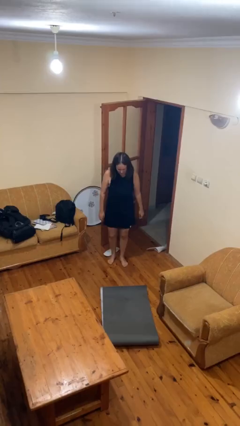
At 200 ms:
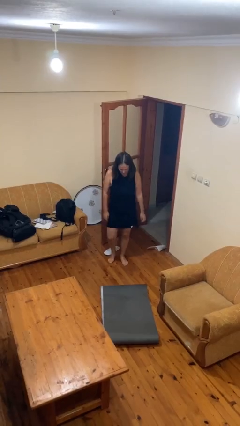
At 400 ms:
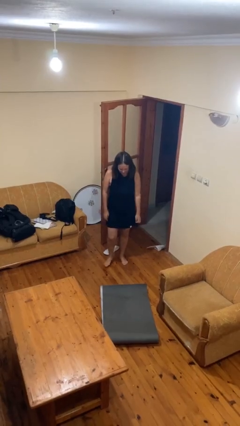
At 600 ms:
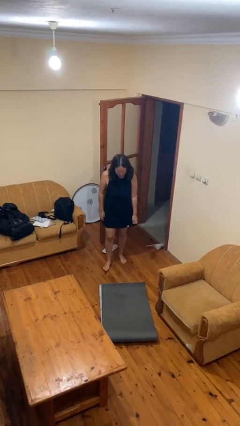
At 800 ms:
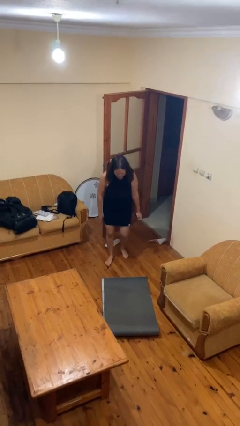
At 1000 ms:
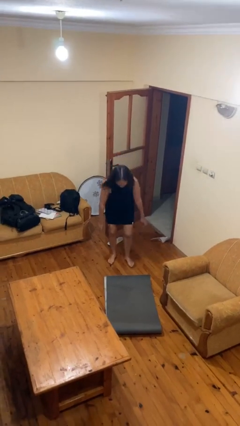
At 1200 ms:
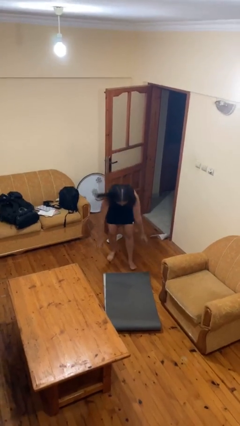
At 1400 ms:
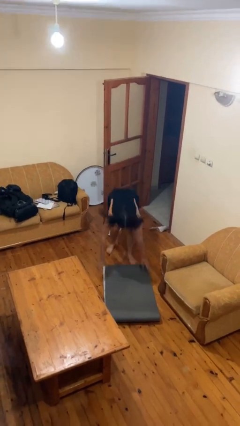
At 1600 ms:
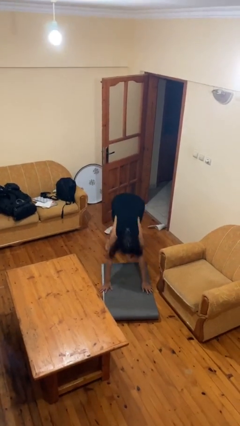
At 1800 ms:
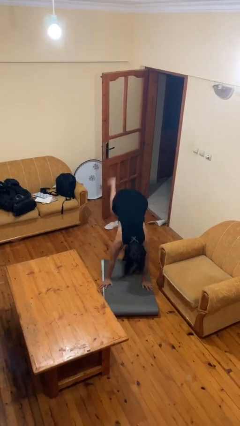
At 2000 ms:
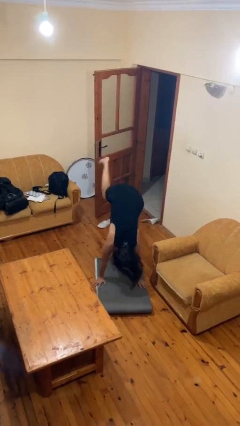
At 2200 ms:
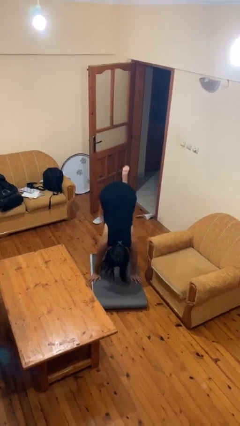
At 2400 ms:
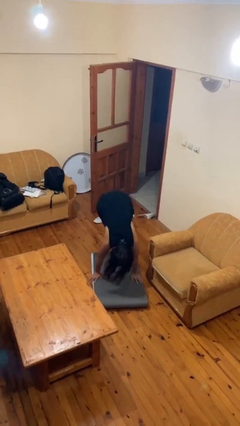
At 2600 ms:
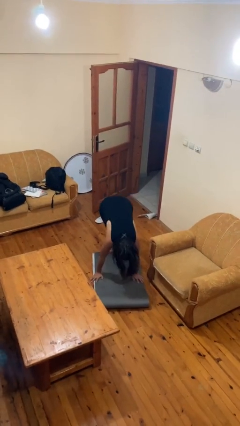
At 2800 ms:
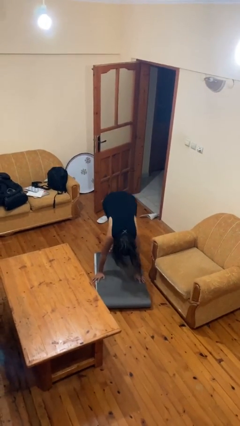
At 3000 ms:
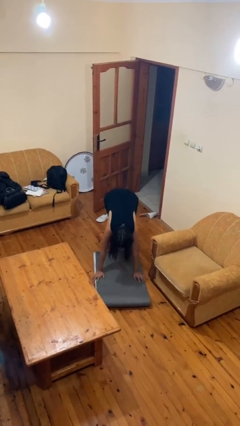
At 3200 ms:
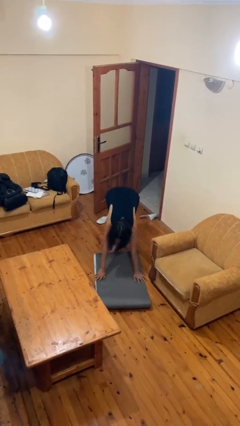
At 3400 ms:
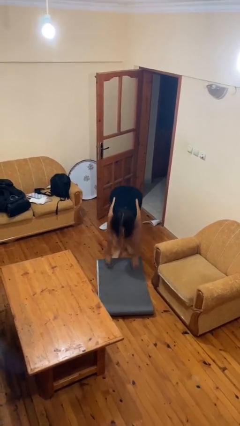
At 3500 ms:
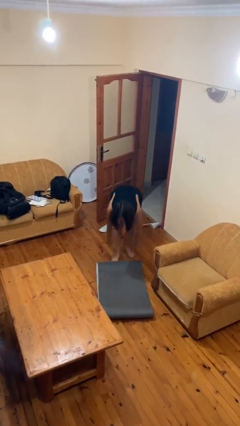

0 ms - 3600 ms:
person handstand

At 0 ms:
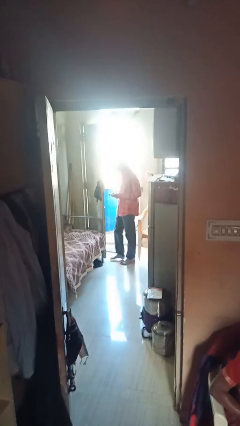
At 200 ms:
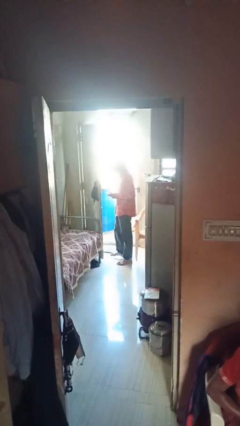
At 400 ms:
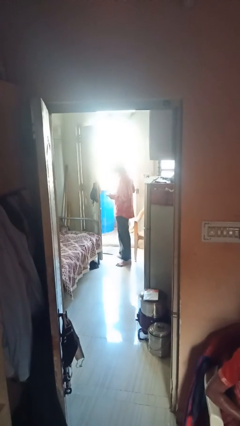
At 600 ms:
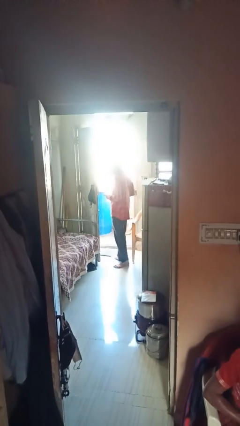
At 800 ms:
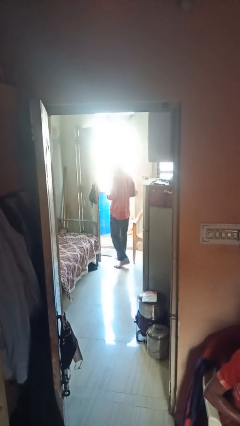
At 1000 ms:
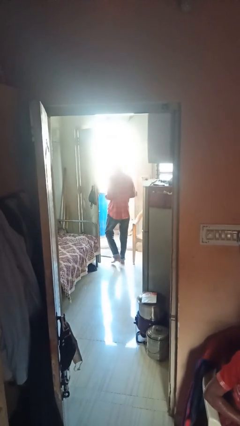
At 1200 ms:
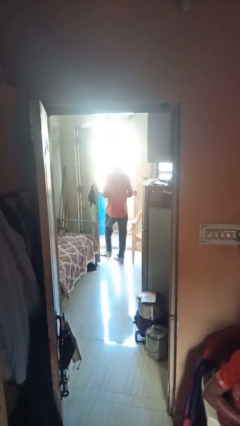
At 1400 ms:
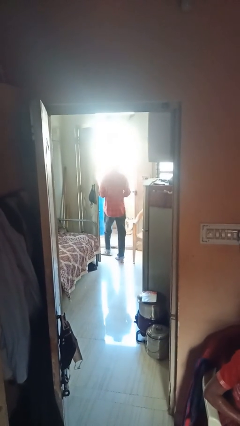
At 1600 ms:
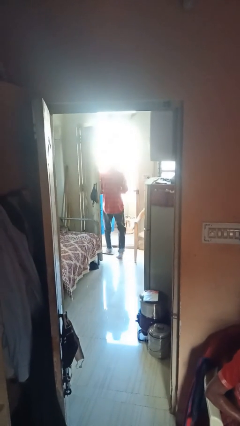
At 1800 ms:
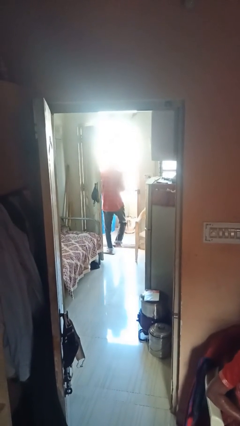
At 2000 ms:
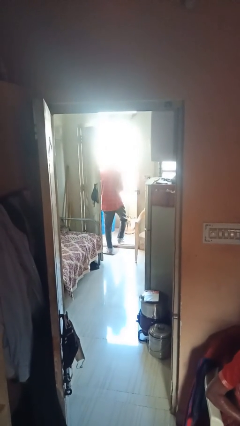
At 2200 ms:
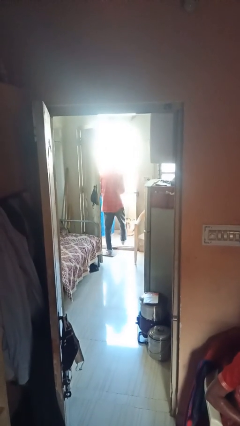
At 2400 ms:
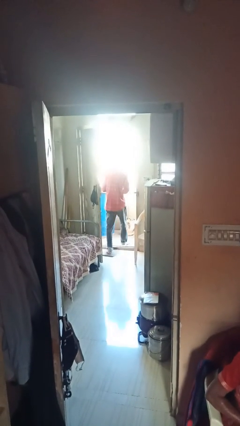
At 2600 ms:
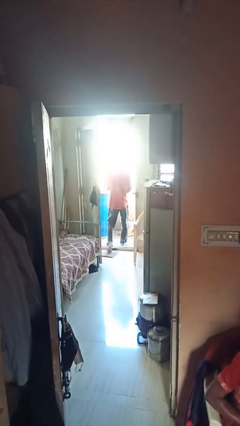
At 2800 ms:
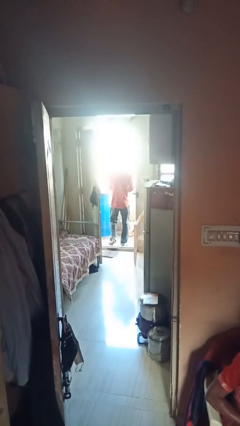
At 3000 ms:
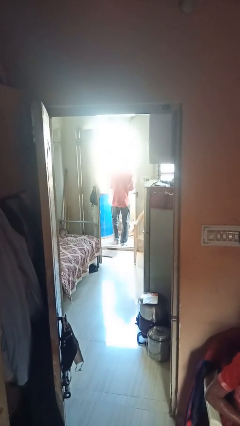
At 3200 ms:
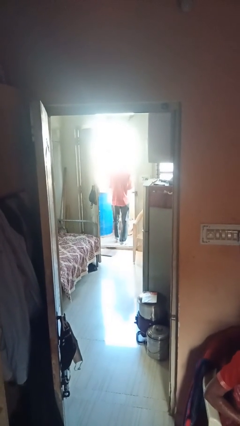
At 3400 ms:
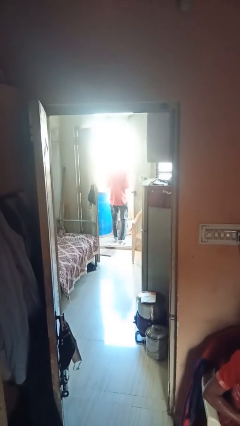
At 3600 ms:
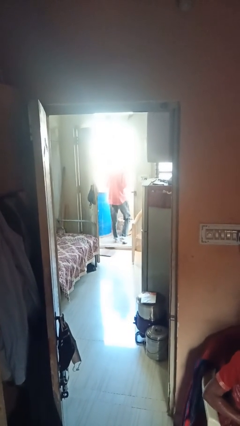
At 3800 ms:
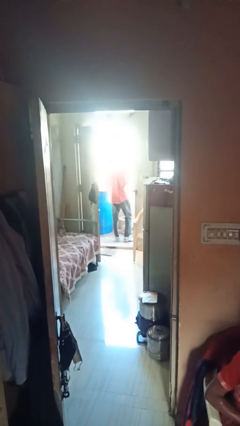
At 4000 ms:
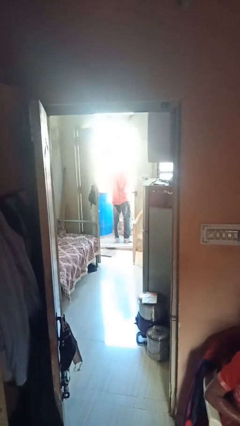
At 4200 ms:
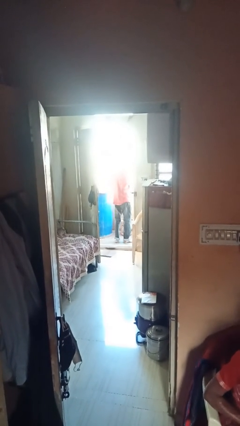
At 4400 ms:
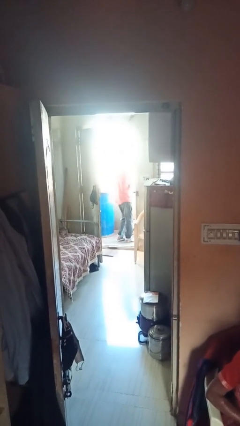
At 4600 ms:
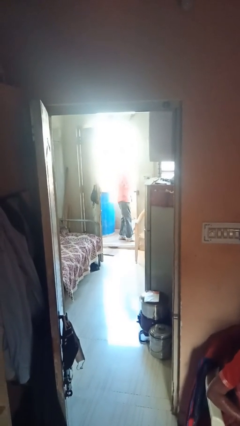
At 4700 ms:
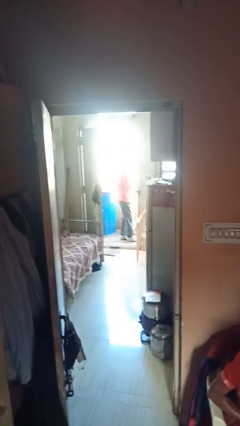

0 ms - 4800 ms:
person exits scene through structure

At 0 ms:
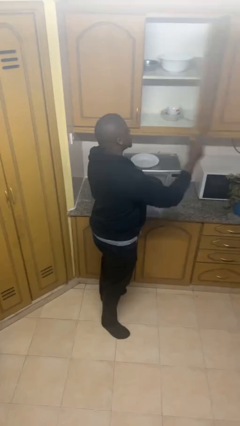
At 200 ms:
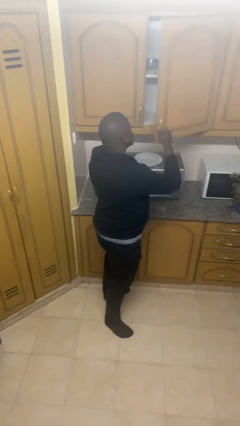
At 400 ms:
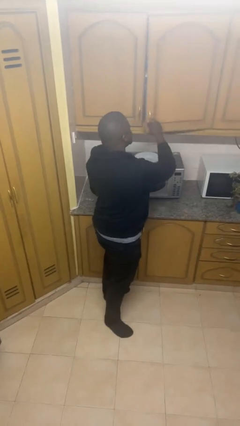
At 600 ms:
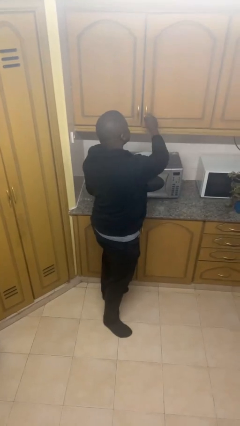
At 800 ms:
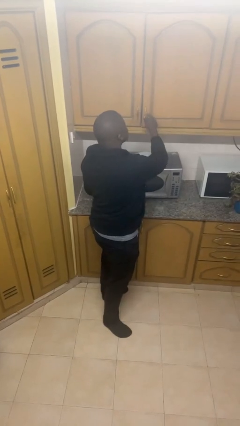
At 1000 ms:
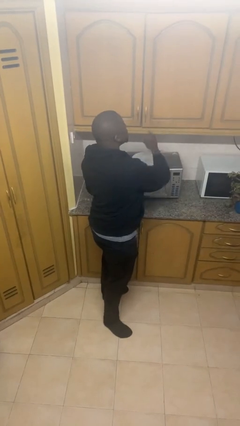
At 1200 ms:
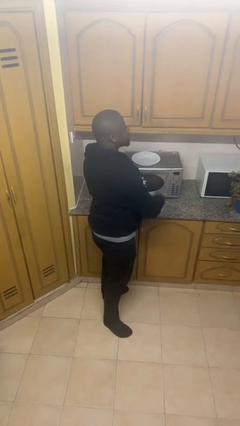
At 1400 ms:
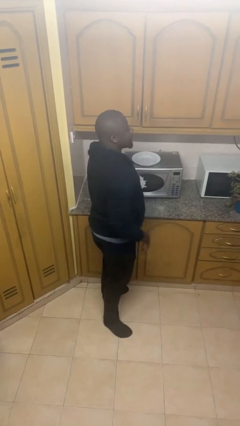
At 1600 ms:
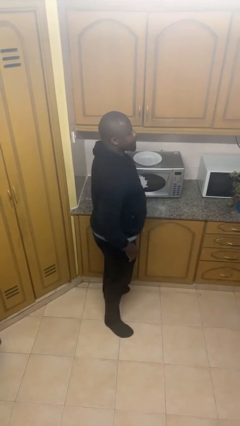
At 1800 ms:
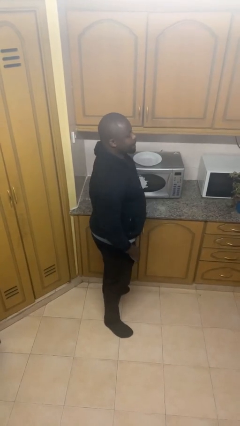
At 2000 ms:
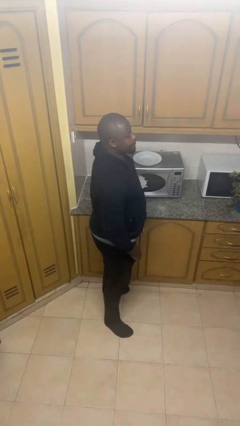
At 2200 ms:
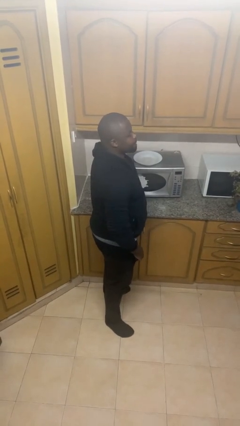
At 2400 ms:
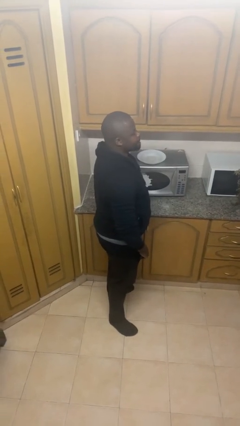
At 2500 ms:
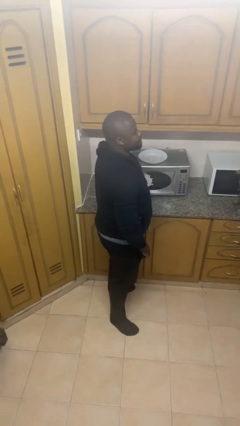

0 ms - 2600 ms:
person closes cabinet

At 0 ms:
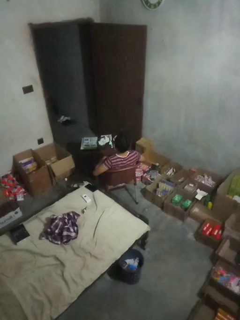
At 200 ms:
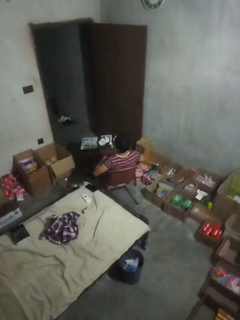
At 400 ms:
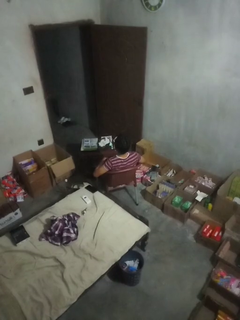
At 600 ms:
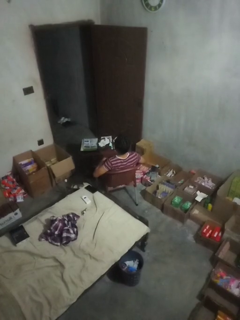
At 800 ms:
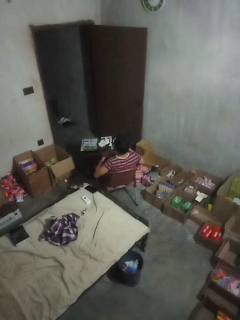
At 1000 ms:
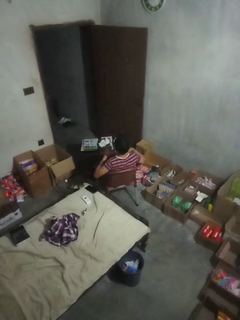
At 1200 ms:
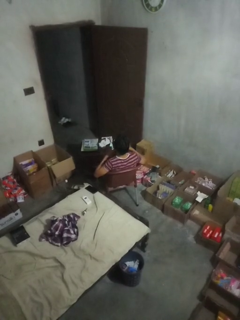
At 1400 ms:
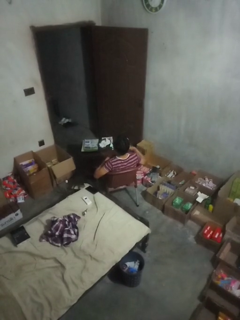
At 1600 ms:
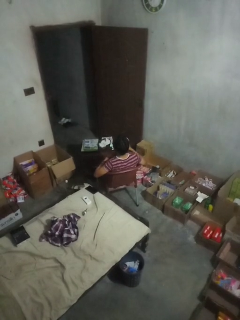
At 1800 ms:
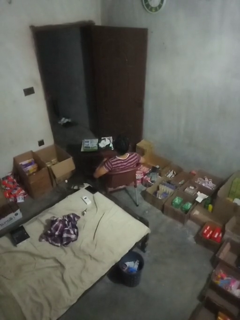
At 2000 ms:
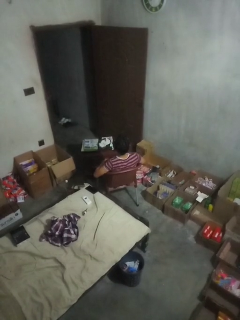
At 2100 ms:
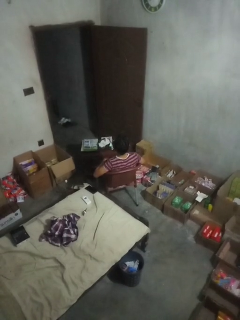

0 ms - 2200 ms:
person drums on chest

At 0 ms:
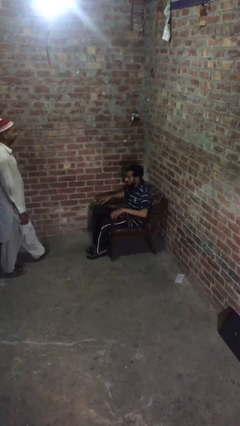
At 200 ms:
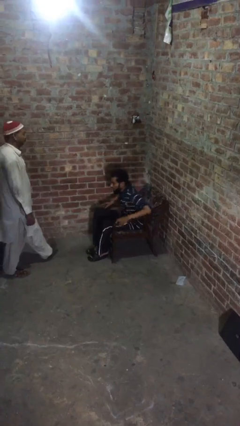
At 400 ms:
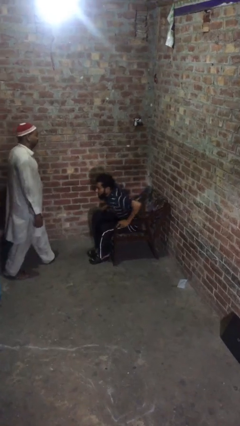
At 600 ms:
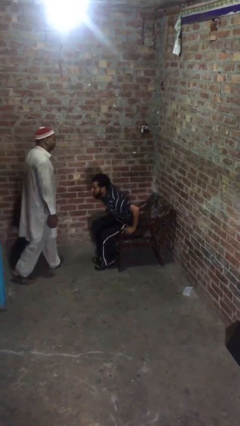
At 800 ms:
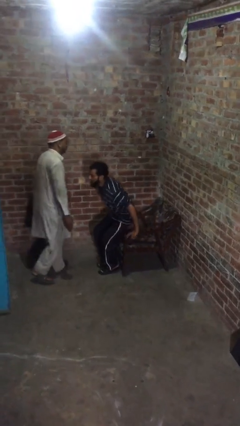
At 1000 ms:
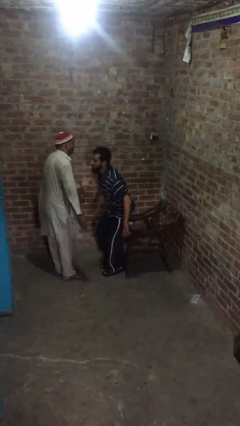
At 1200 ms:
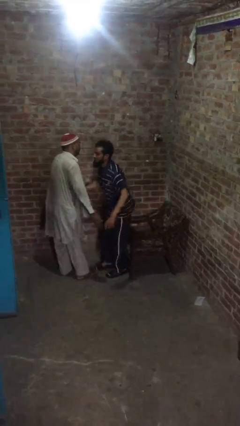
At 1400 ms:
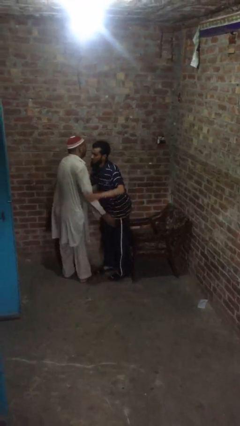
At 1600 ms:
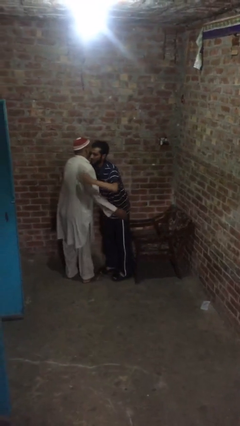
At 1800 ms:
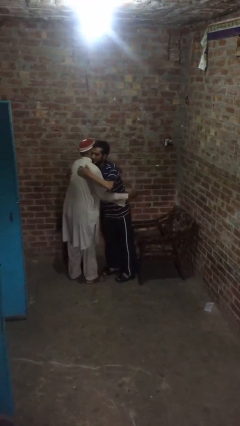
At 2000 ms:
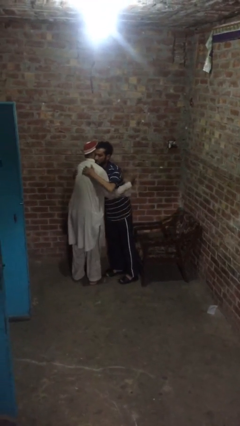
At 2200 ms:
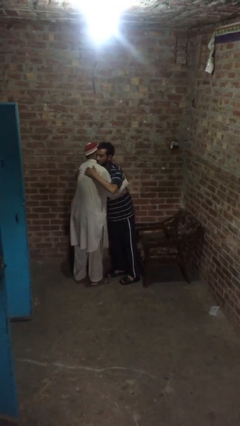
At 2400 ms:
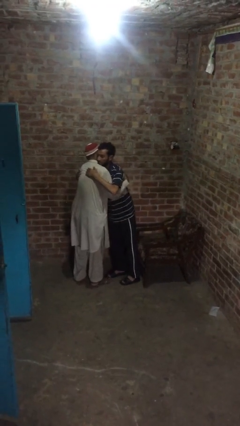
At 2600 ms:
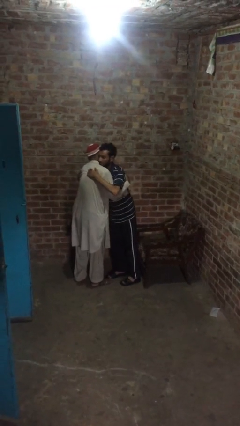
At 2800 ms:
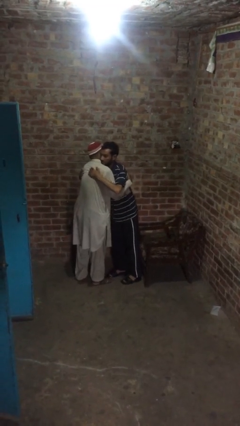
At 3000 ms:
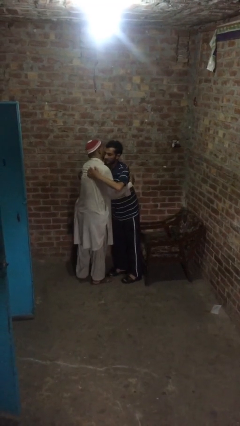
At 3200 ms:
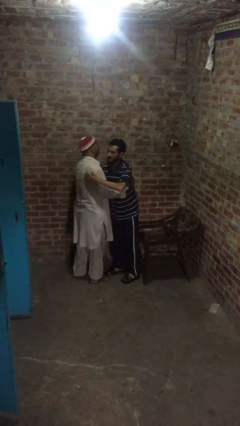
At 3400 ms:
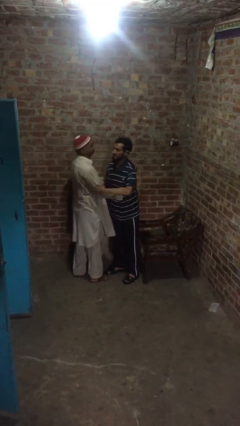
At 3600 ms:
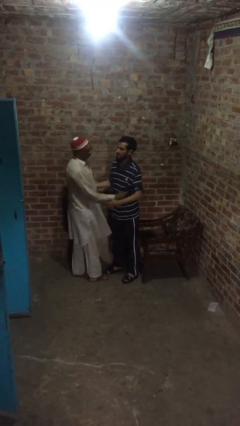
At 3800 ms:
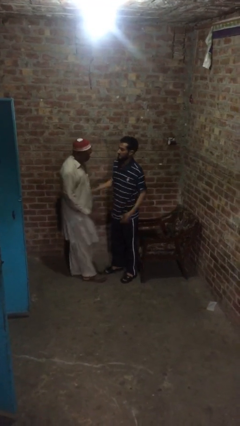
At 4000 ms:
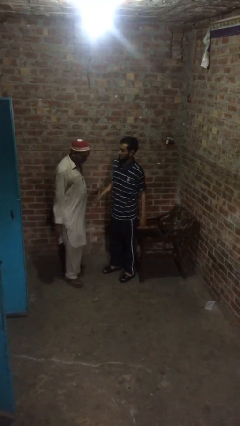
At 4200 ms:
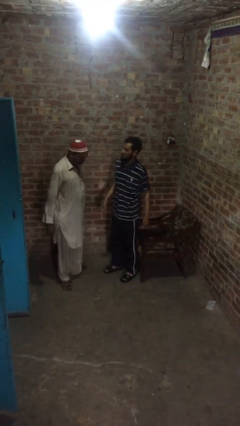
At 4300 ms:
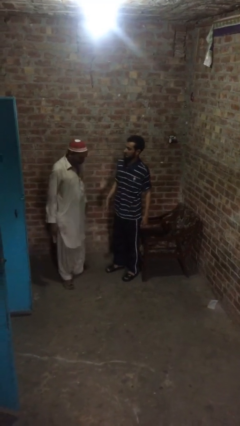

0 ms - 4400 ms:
person embraces person
